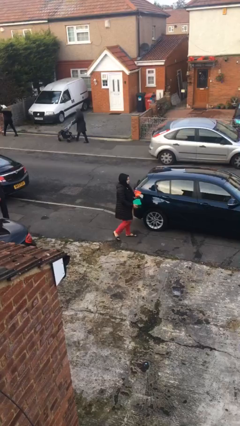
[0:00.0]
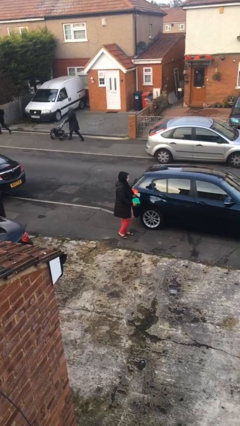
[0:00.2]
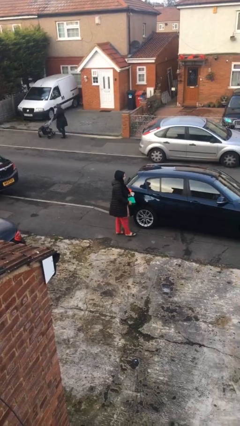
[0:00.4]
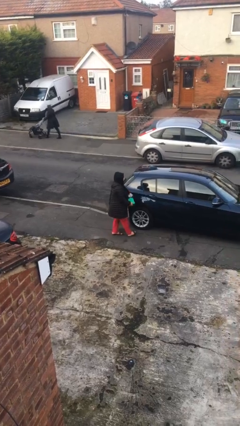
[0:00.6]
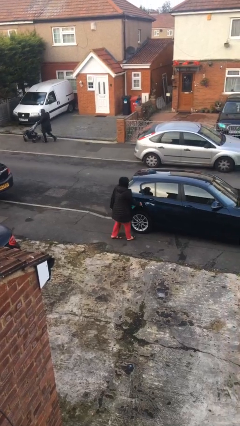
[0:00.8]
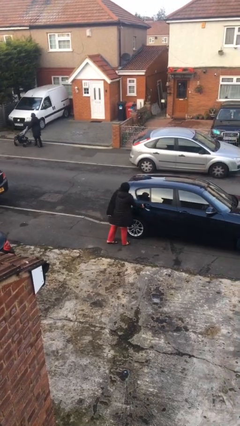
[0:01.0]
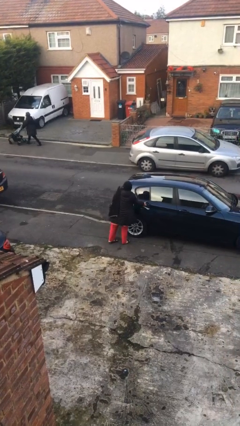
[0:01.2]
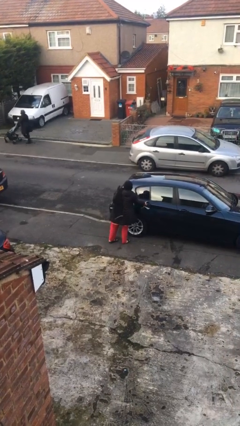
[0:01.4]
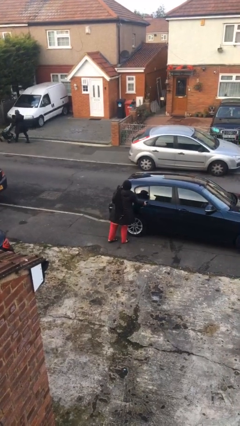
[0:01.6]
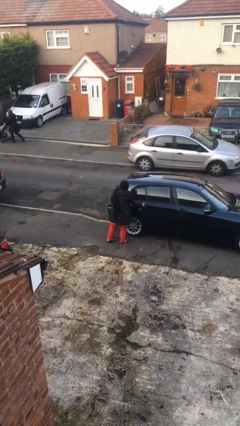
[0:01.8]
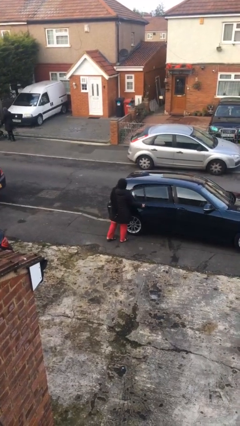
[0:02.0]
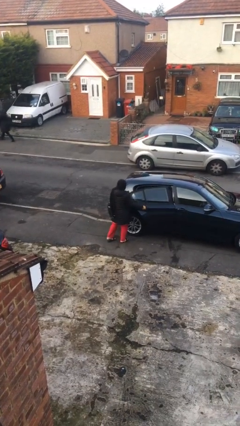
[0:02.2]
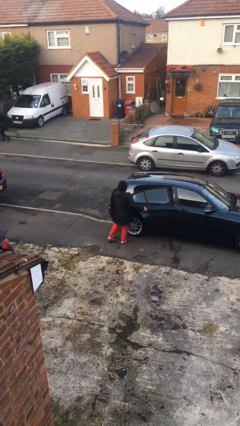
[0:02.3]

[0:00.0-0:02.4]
person opens car door

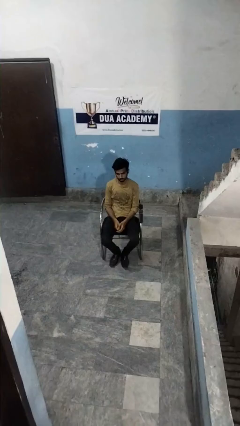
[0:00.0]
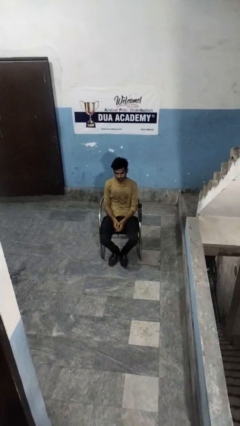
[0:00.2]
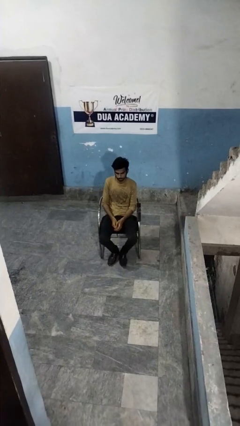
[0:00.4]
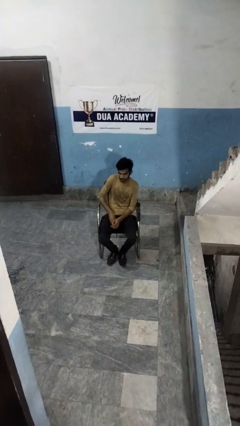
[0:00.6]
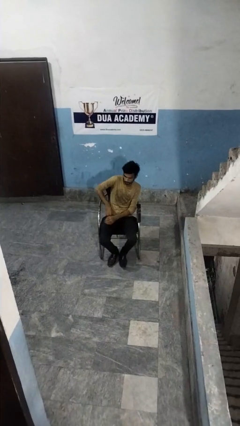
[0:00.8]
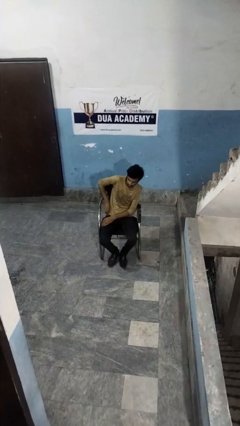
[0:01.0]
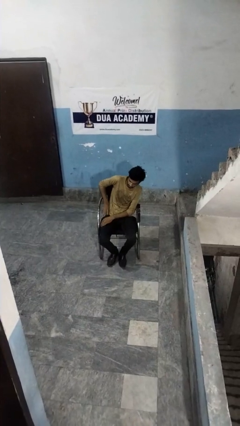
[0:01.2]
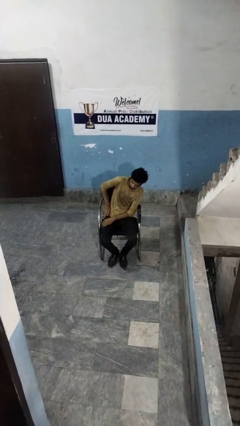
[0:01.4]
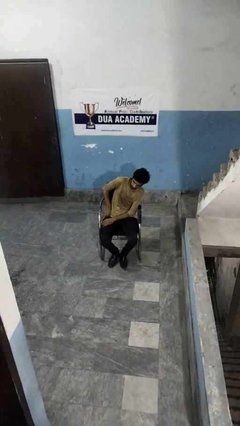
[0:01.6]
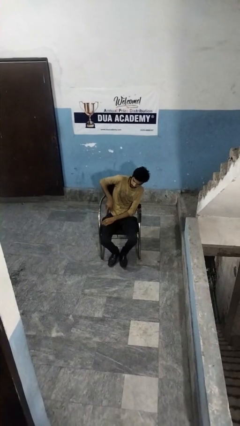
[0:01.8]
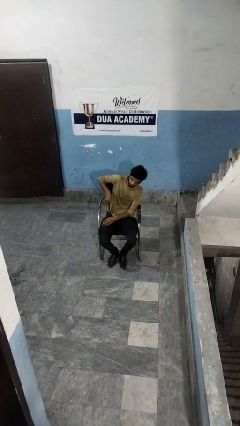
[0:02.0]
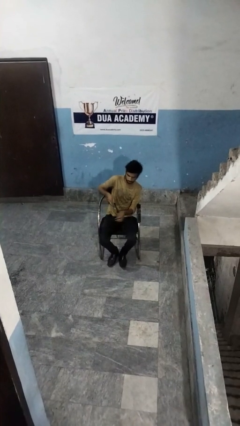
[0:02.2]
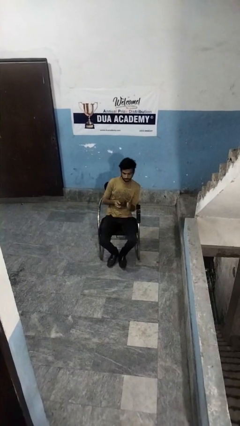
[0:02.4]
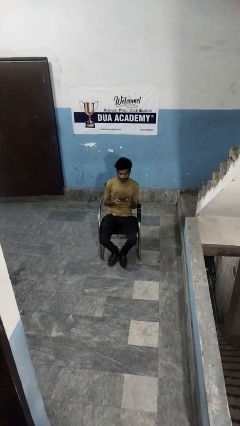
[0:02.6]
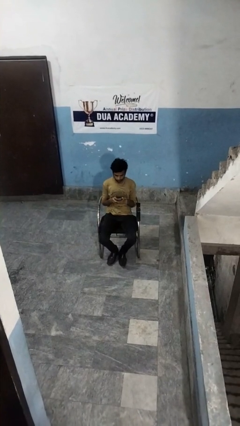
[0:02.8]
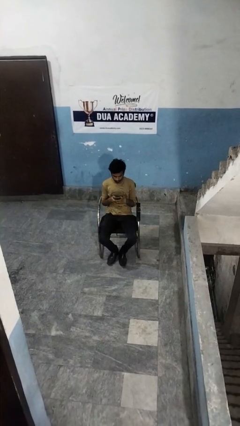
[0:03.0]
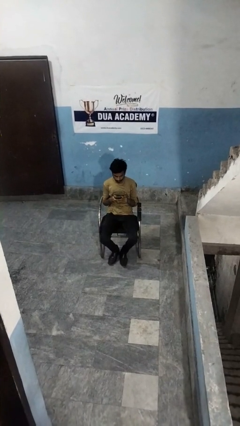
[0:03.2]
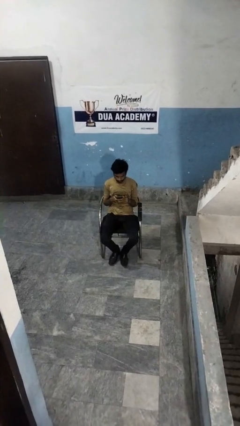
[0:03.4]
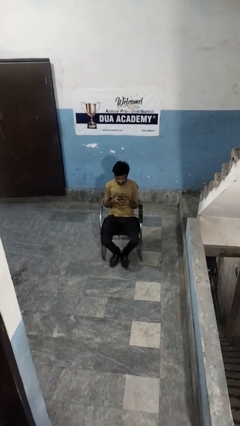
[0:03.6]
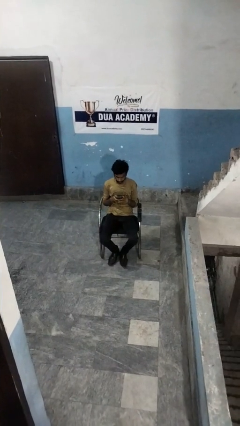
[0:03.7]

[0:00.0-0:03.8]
person takes phone from pocket

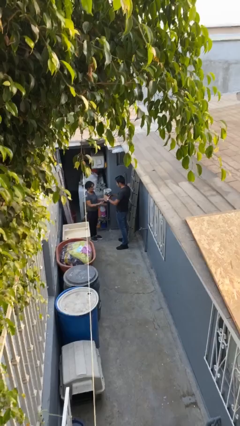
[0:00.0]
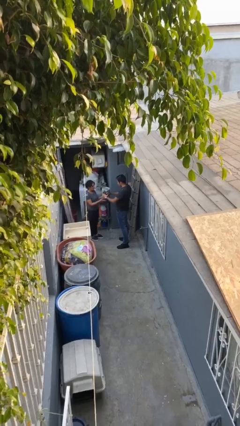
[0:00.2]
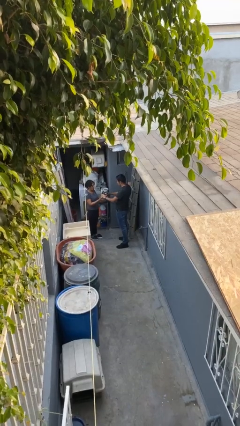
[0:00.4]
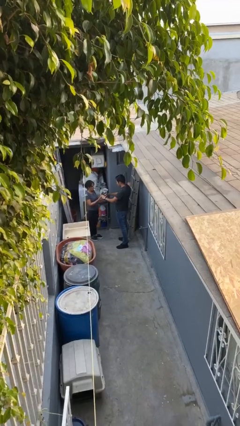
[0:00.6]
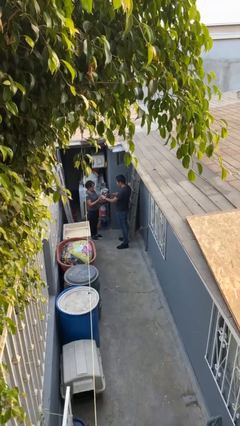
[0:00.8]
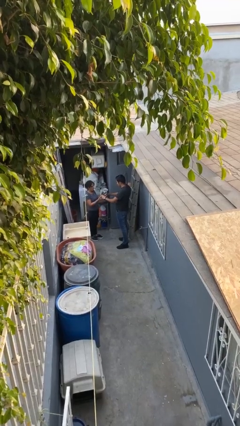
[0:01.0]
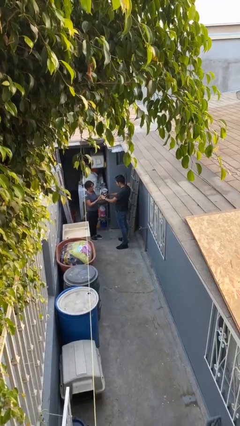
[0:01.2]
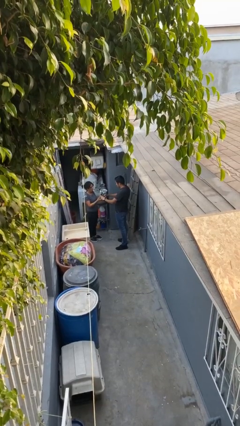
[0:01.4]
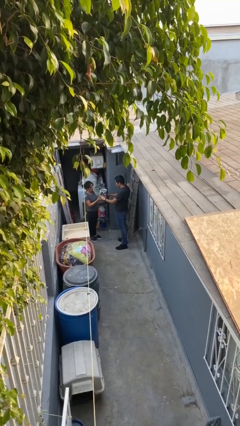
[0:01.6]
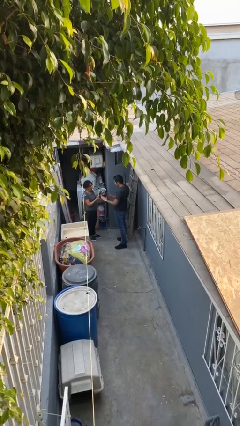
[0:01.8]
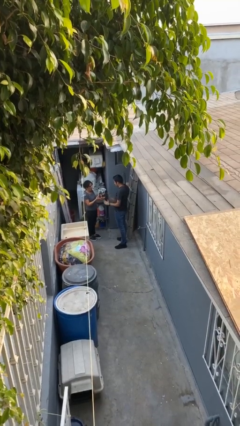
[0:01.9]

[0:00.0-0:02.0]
person transfers object to person

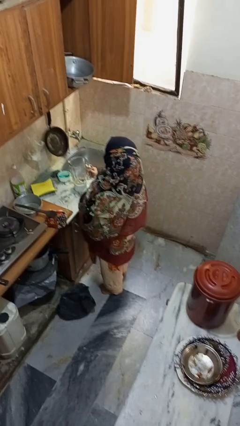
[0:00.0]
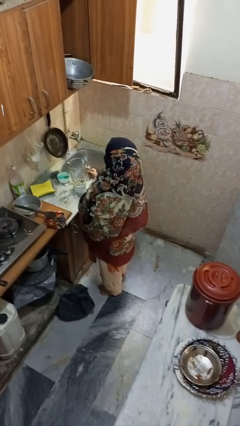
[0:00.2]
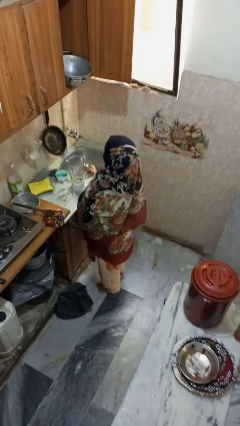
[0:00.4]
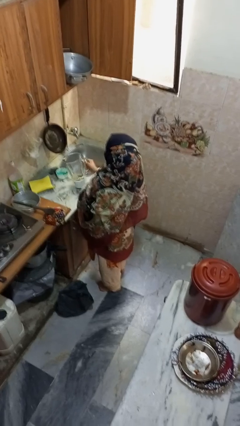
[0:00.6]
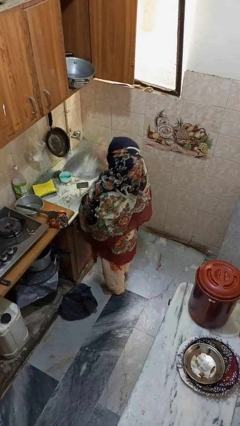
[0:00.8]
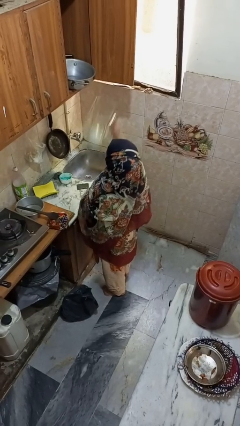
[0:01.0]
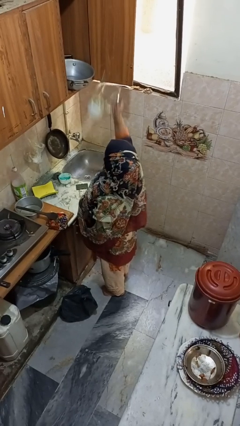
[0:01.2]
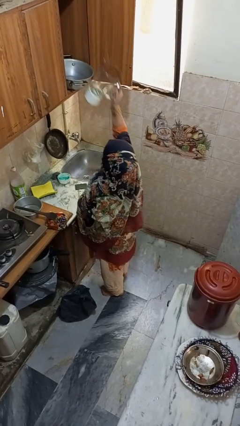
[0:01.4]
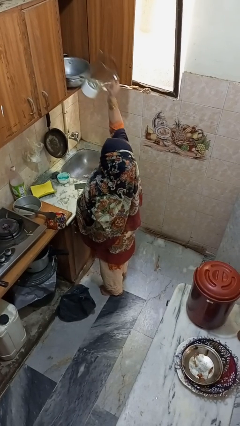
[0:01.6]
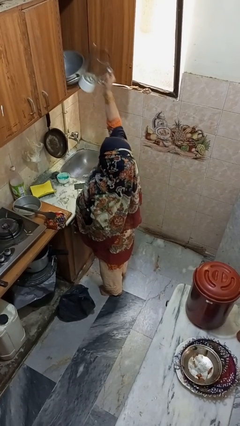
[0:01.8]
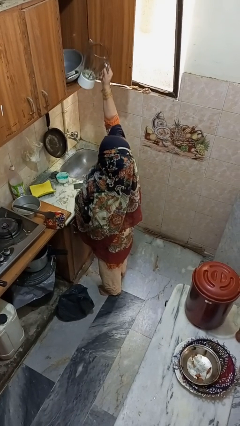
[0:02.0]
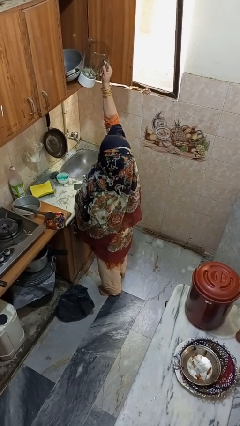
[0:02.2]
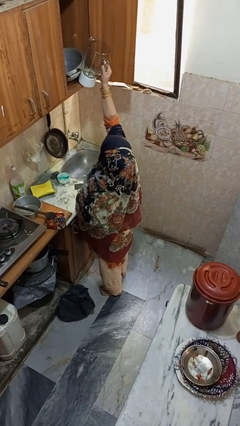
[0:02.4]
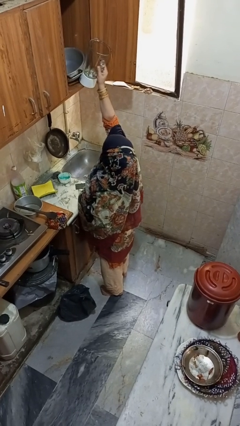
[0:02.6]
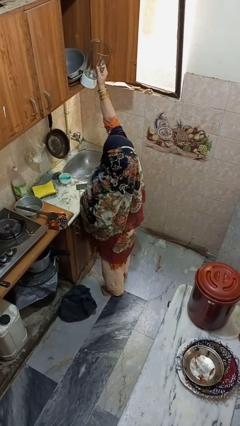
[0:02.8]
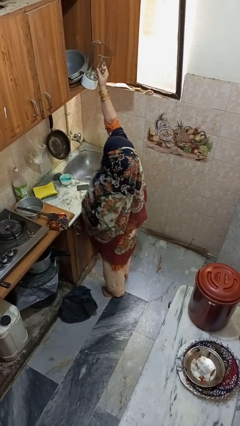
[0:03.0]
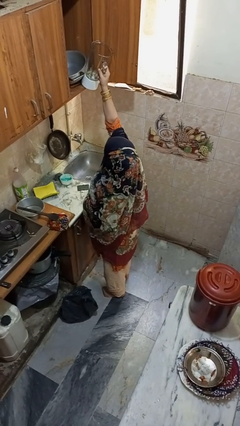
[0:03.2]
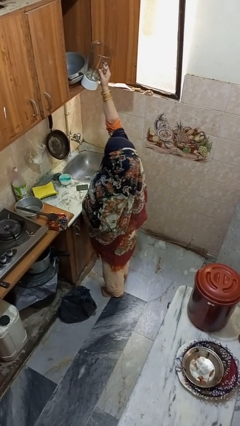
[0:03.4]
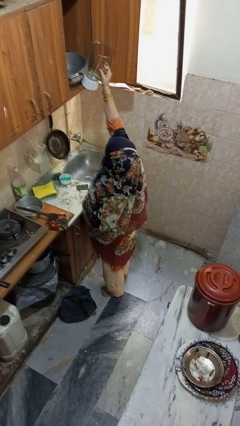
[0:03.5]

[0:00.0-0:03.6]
person takes object from cabinet

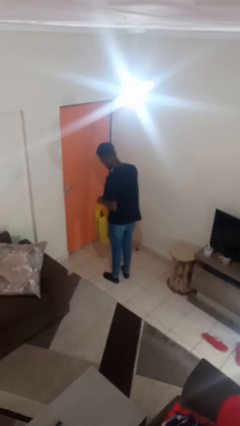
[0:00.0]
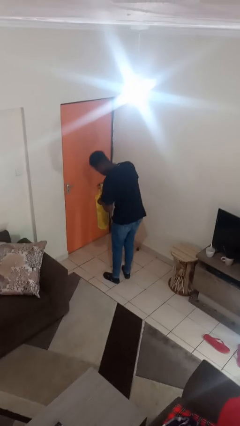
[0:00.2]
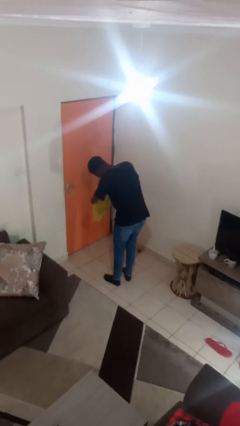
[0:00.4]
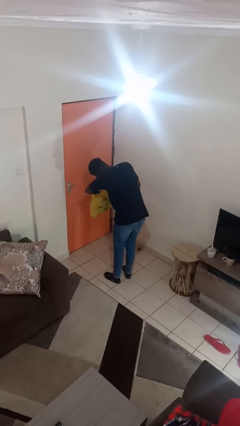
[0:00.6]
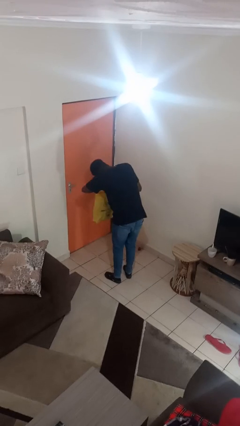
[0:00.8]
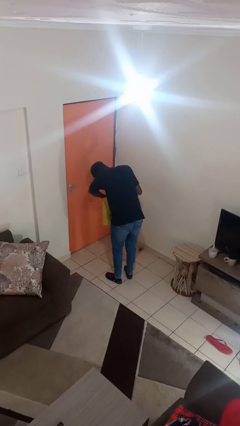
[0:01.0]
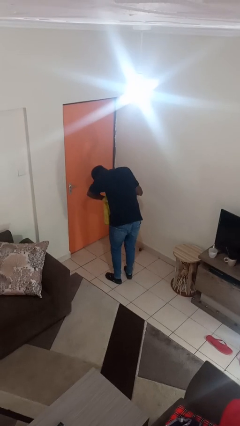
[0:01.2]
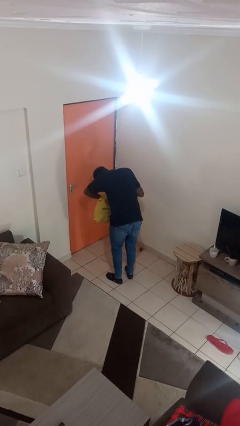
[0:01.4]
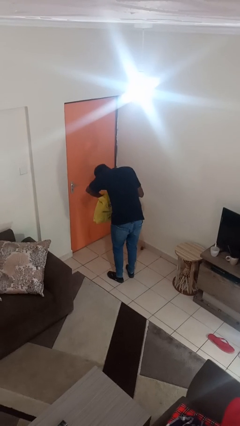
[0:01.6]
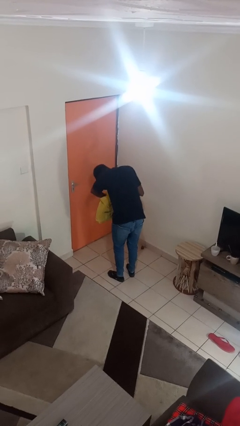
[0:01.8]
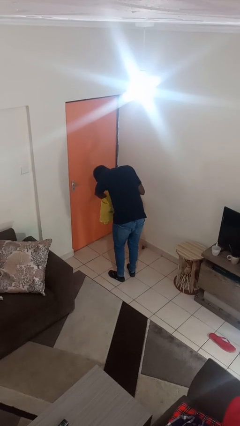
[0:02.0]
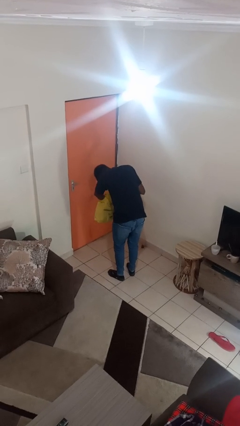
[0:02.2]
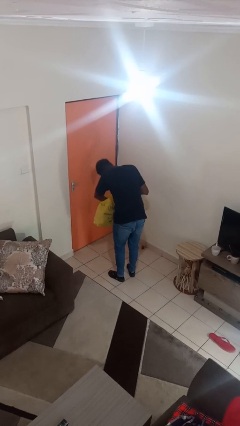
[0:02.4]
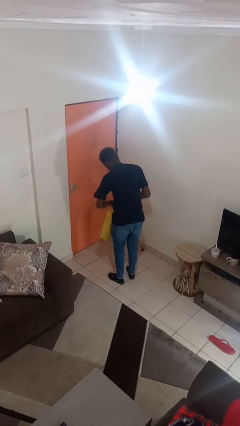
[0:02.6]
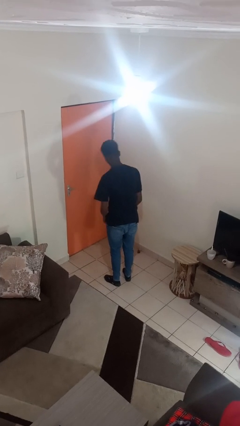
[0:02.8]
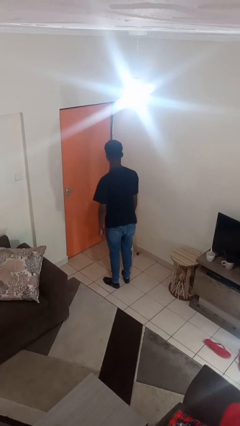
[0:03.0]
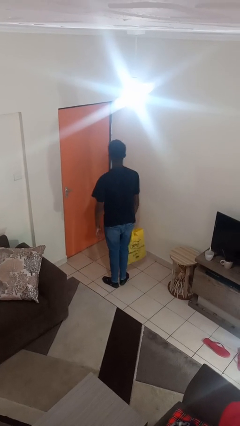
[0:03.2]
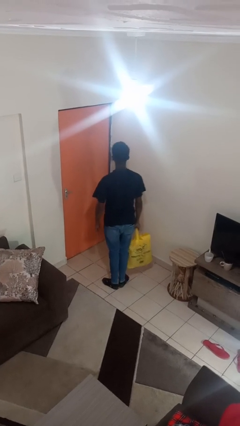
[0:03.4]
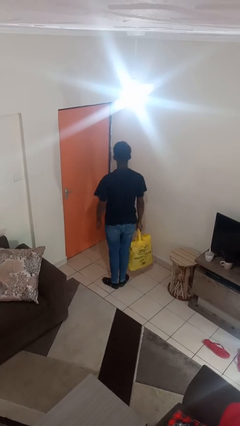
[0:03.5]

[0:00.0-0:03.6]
person searches in bag

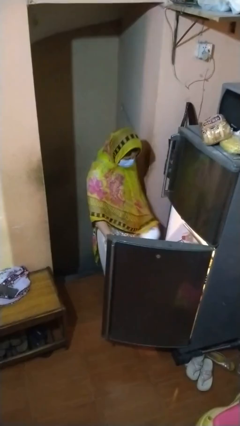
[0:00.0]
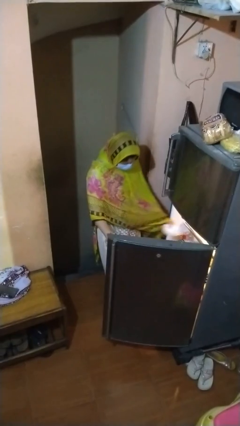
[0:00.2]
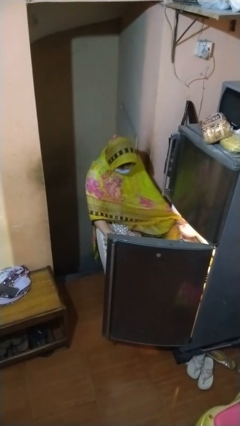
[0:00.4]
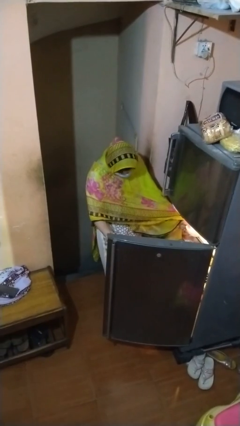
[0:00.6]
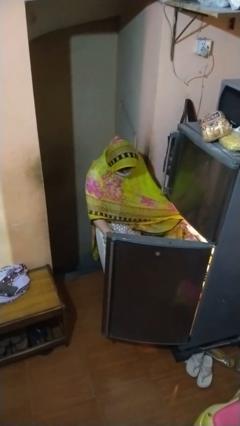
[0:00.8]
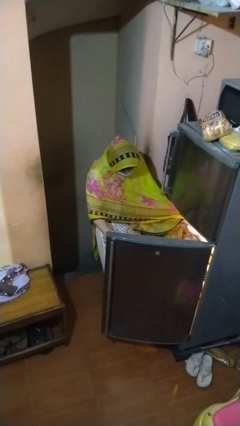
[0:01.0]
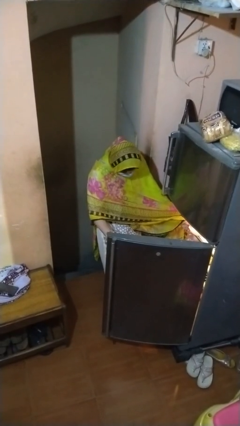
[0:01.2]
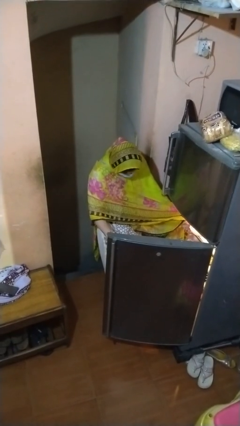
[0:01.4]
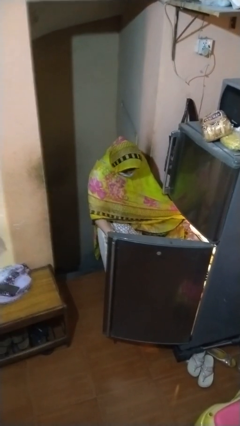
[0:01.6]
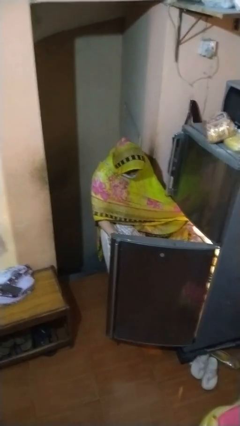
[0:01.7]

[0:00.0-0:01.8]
person puts object into refrigerator
